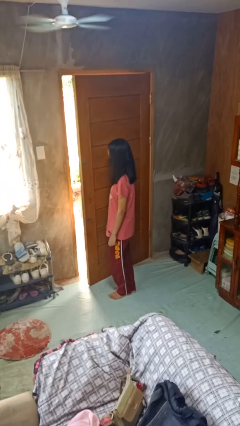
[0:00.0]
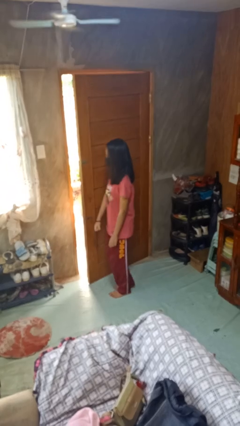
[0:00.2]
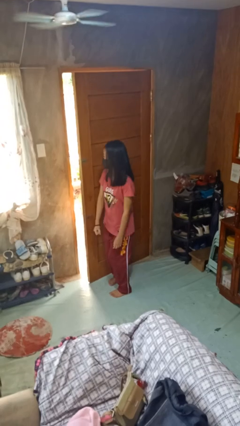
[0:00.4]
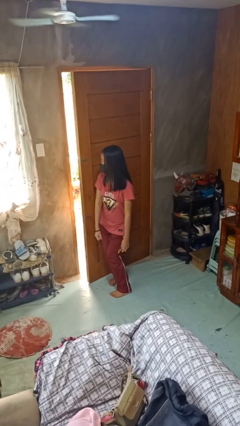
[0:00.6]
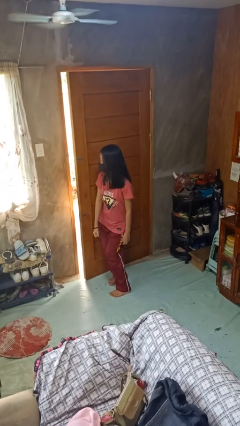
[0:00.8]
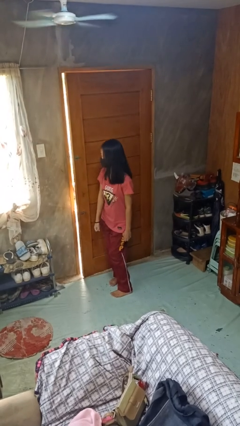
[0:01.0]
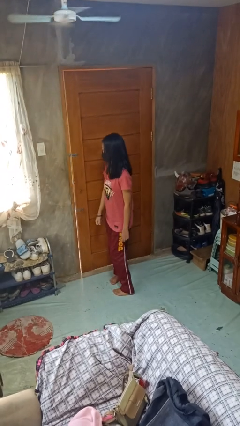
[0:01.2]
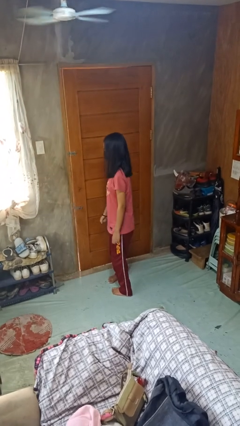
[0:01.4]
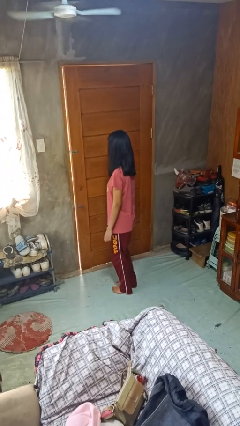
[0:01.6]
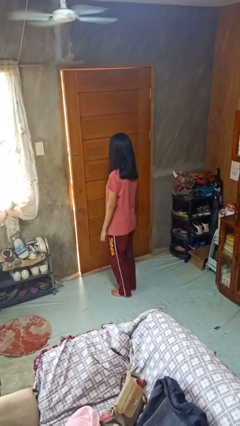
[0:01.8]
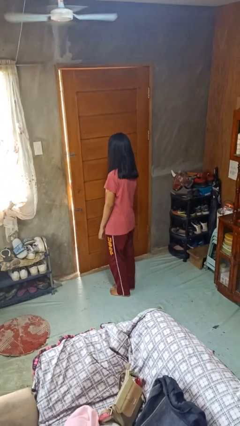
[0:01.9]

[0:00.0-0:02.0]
person closes door with hip

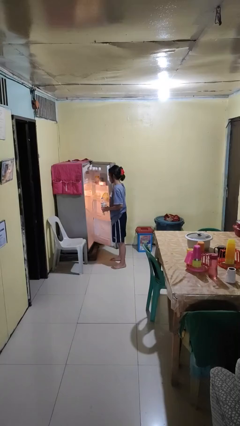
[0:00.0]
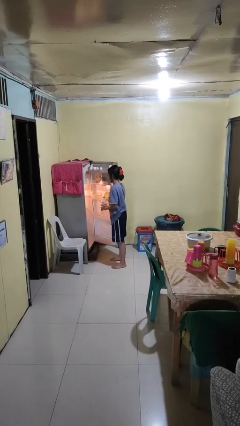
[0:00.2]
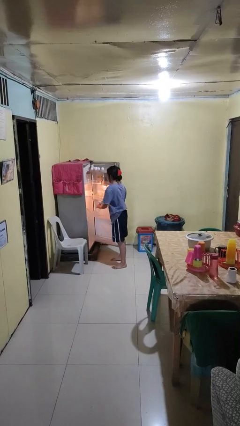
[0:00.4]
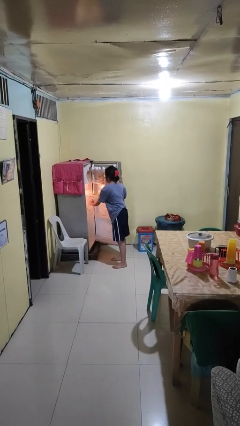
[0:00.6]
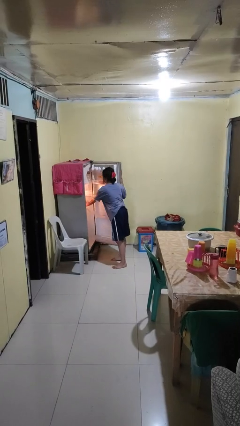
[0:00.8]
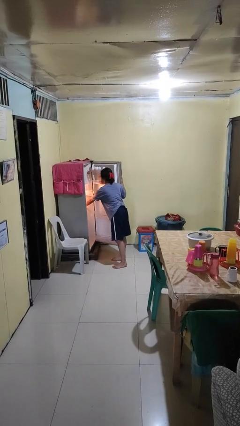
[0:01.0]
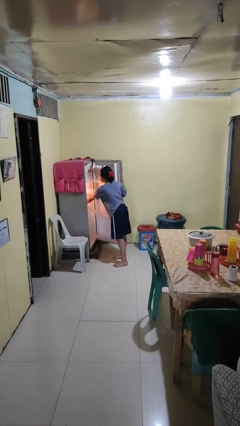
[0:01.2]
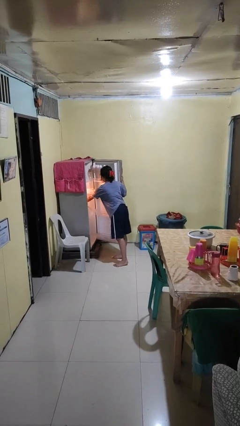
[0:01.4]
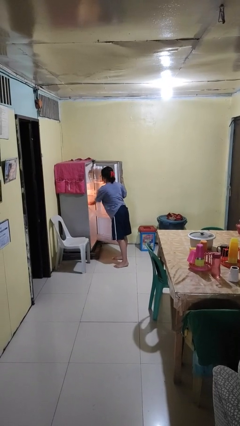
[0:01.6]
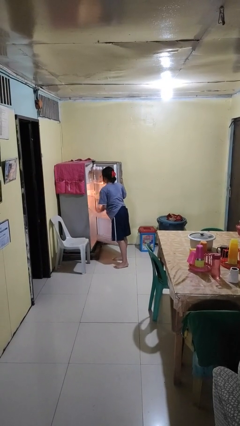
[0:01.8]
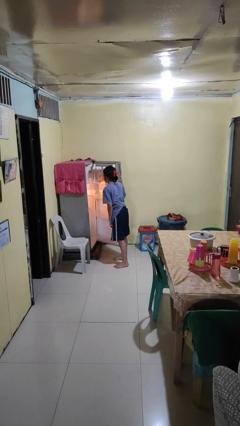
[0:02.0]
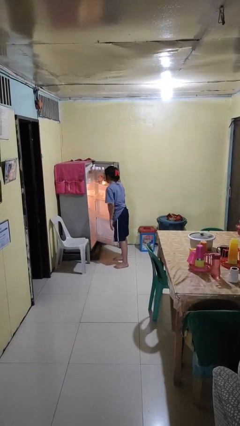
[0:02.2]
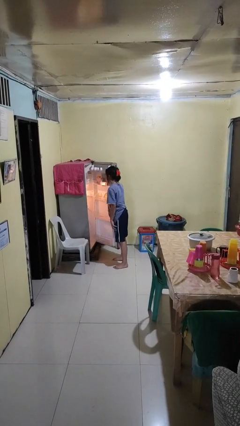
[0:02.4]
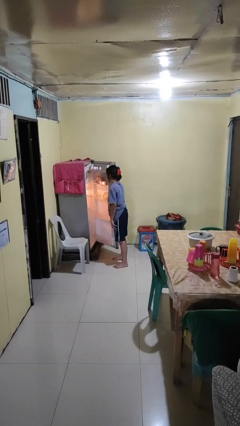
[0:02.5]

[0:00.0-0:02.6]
person puts object into refrigerator

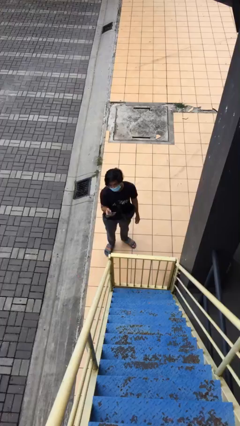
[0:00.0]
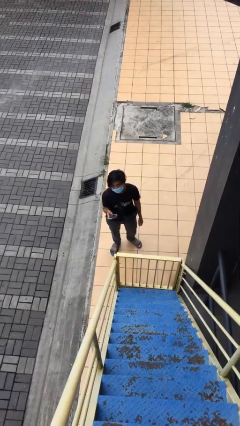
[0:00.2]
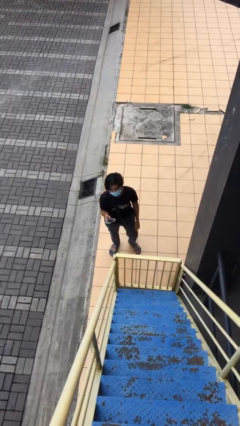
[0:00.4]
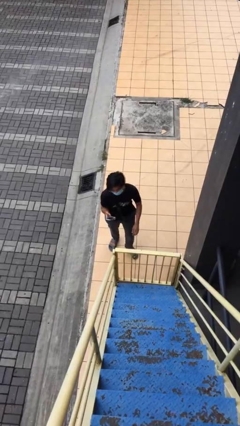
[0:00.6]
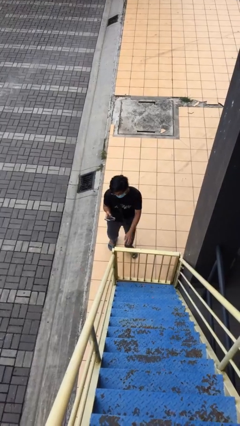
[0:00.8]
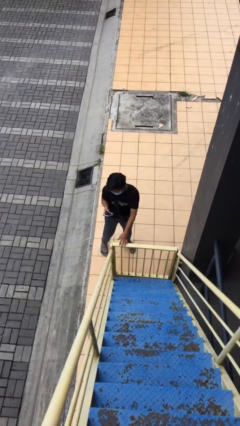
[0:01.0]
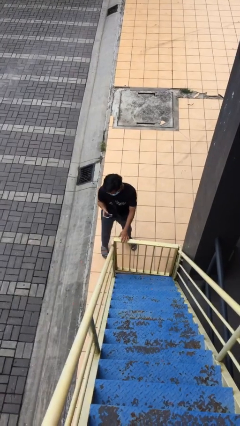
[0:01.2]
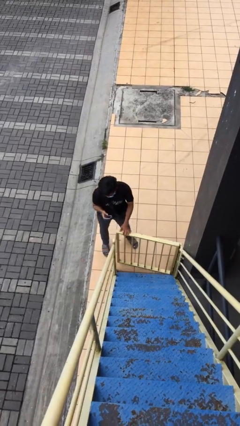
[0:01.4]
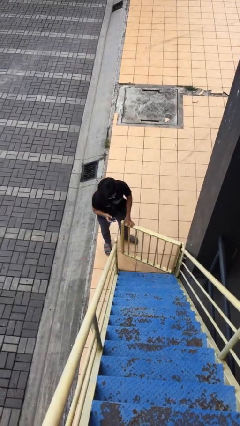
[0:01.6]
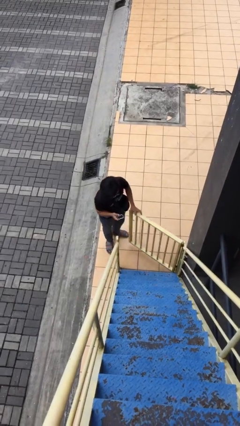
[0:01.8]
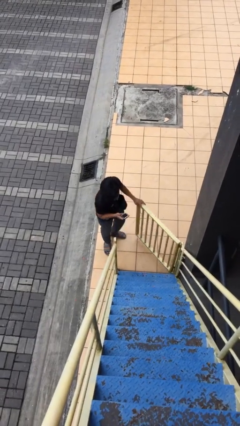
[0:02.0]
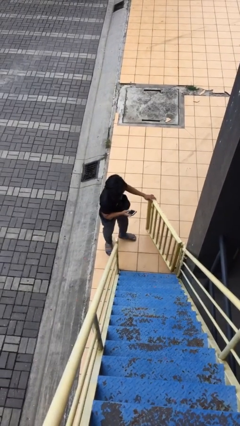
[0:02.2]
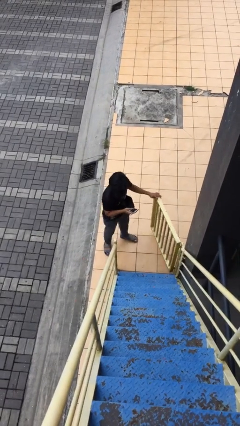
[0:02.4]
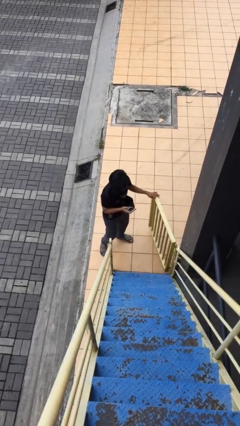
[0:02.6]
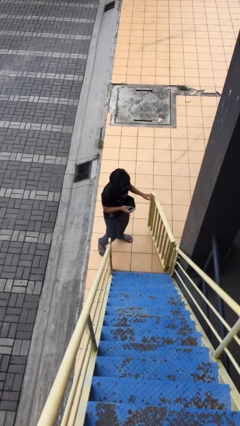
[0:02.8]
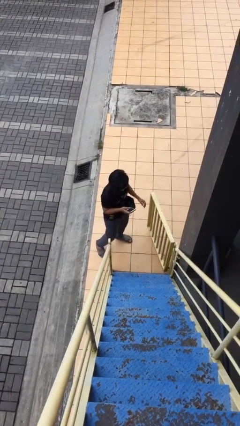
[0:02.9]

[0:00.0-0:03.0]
person opens facility door

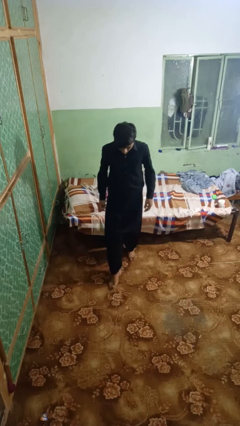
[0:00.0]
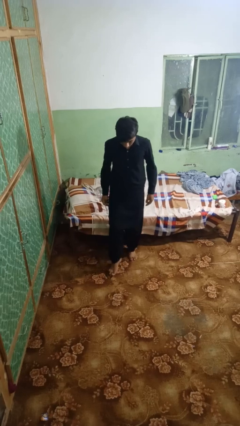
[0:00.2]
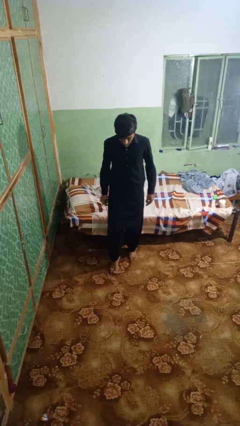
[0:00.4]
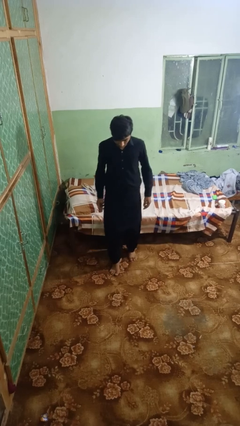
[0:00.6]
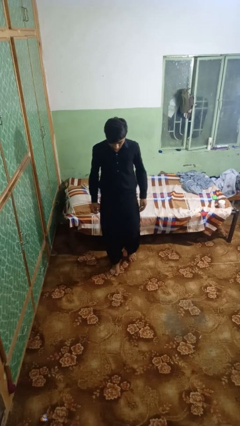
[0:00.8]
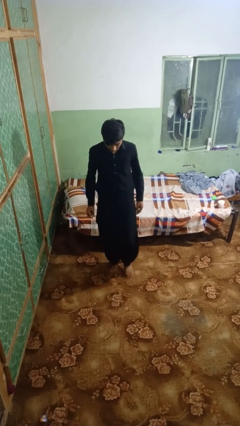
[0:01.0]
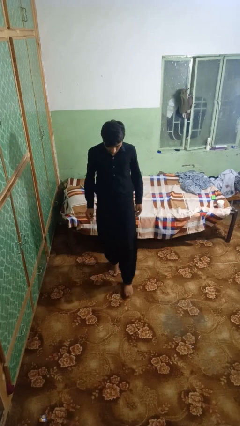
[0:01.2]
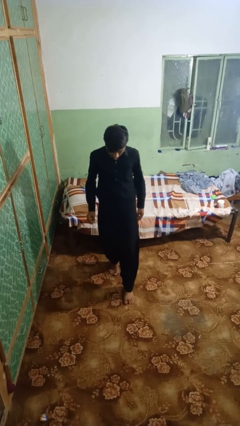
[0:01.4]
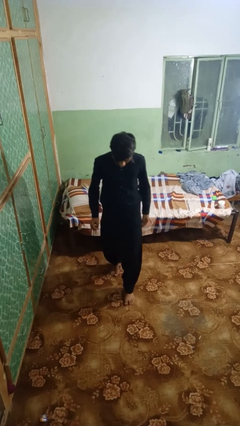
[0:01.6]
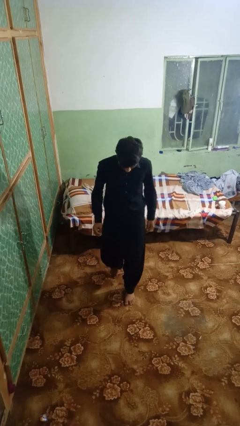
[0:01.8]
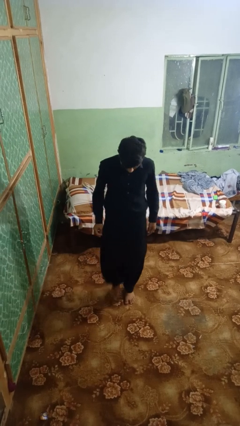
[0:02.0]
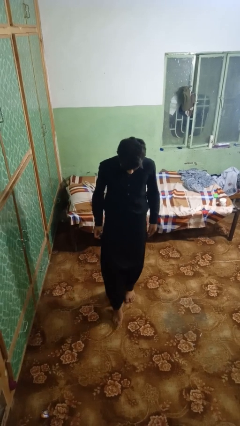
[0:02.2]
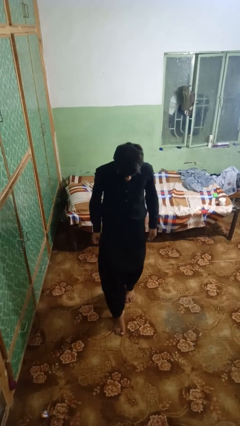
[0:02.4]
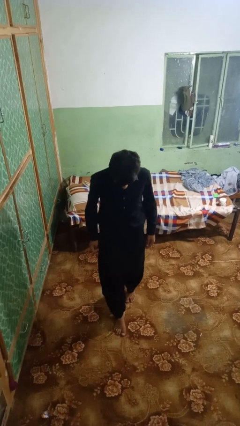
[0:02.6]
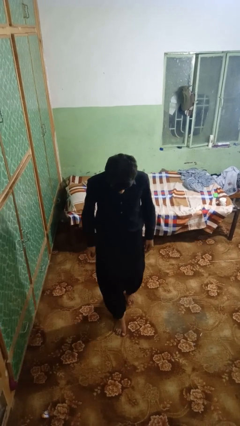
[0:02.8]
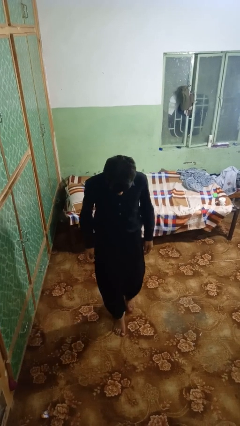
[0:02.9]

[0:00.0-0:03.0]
person walks tiptoe

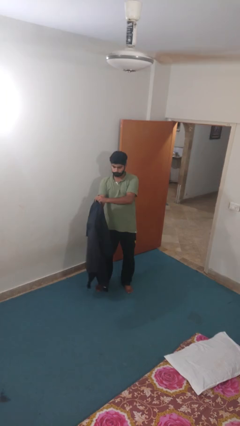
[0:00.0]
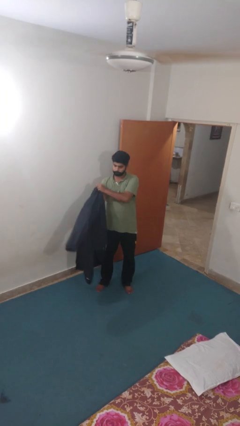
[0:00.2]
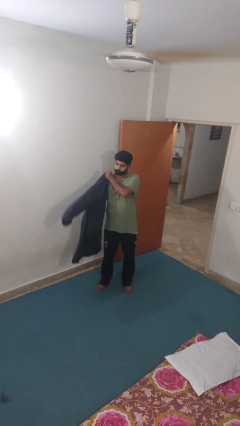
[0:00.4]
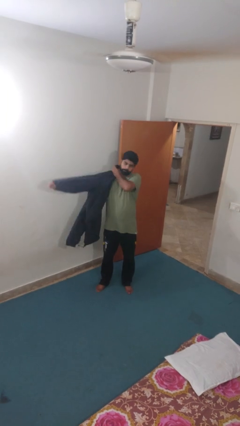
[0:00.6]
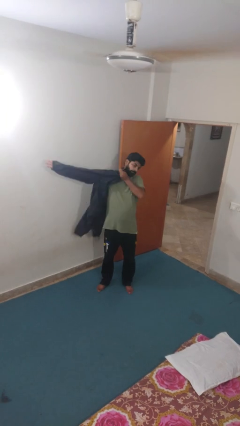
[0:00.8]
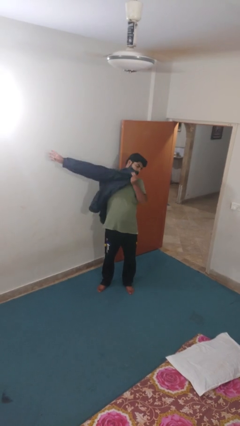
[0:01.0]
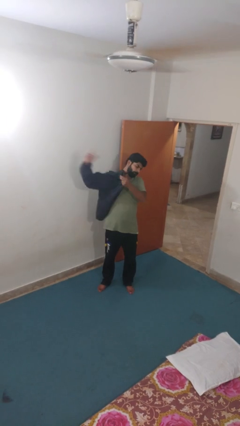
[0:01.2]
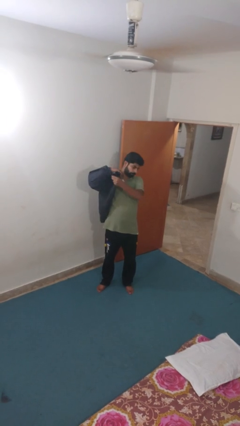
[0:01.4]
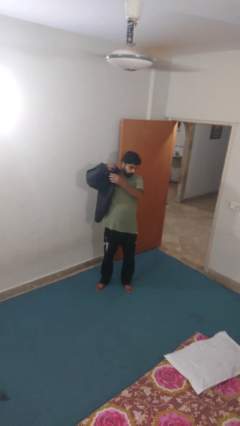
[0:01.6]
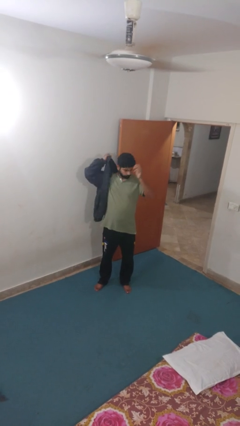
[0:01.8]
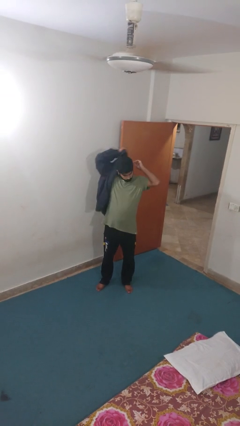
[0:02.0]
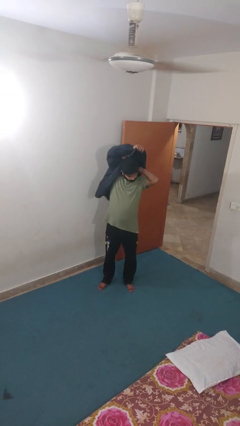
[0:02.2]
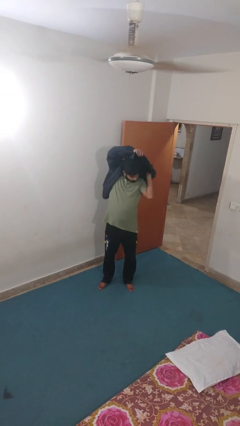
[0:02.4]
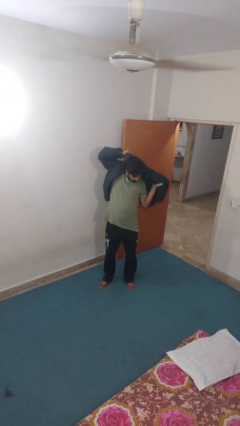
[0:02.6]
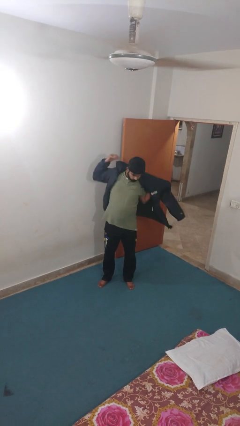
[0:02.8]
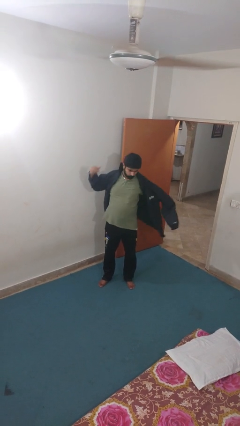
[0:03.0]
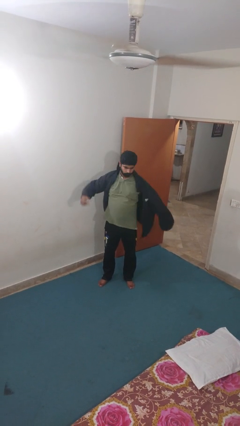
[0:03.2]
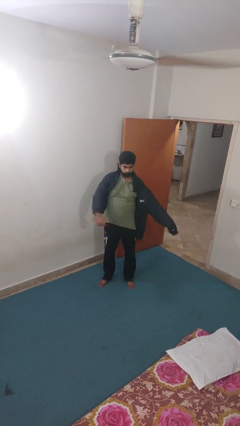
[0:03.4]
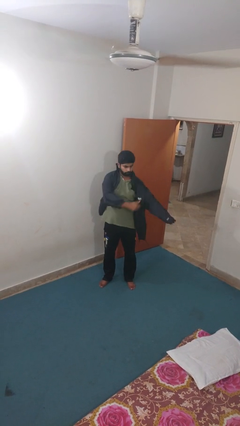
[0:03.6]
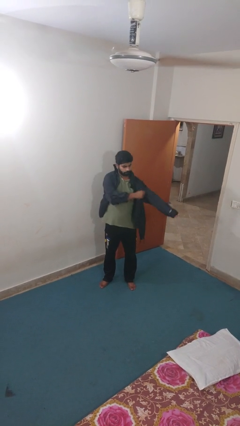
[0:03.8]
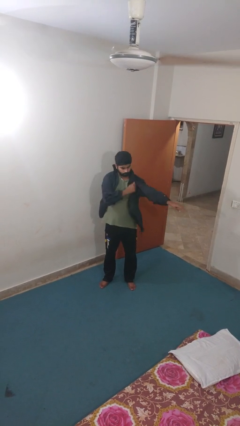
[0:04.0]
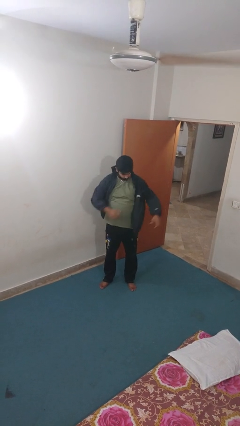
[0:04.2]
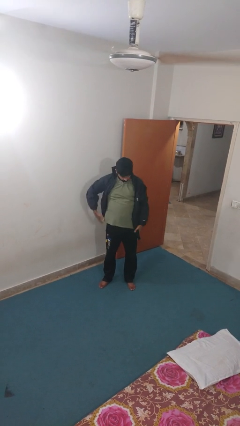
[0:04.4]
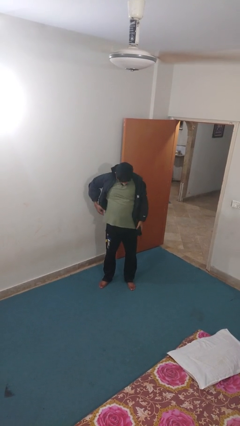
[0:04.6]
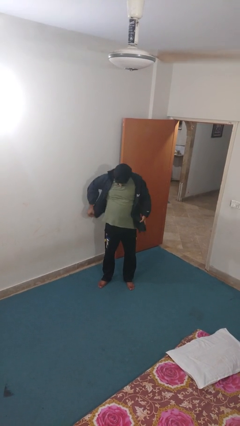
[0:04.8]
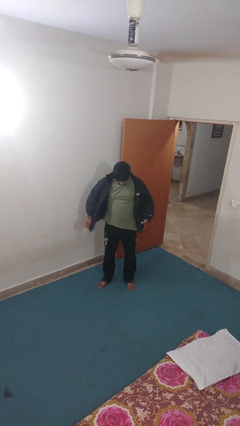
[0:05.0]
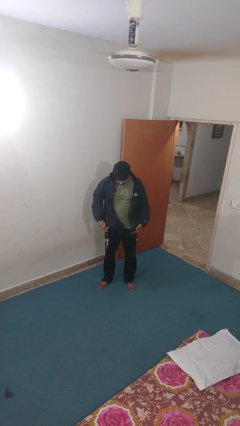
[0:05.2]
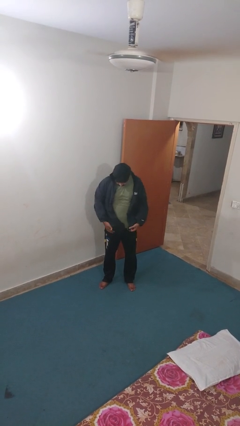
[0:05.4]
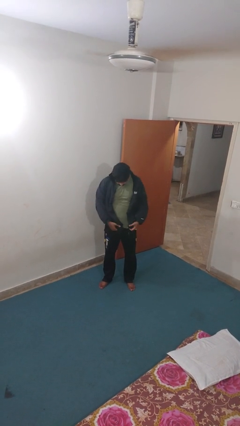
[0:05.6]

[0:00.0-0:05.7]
person puts on jacket

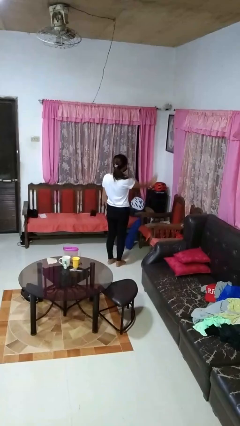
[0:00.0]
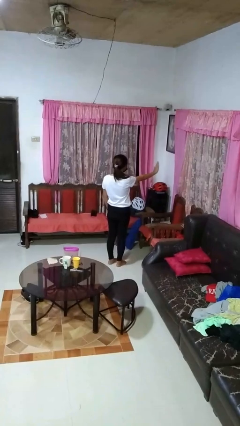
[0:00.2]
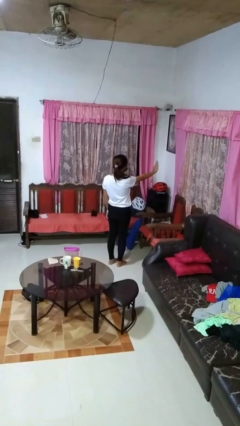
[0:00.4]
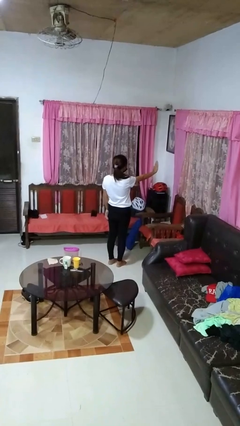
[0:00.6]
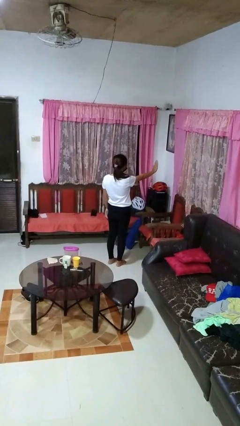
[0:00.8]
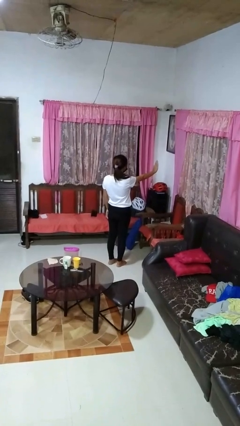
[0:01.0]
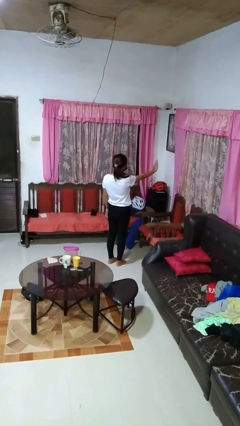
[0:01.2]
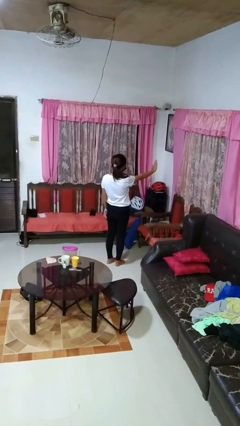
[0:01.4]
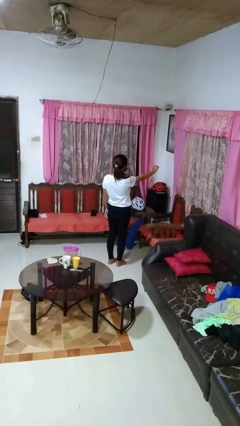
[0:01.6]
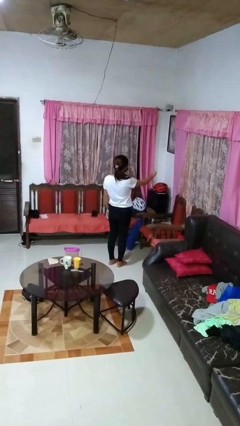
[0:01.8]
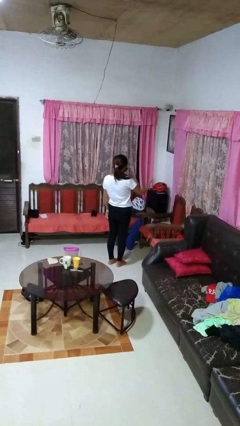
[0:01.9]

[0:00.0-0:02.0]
person gestures stop
